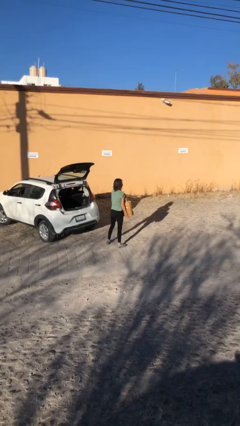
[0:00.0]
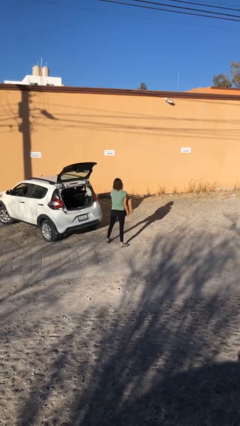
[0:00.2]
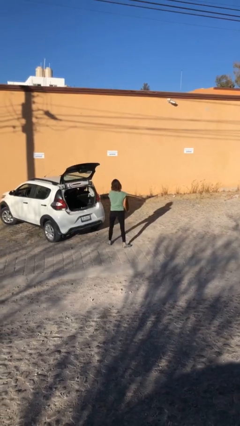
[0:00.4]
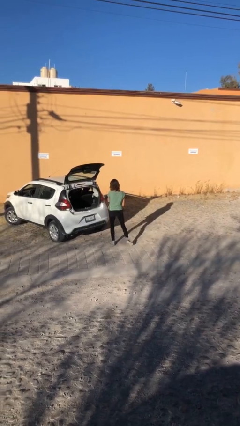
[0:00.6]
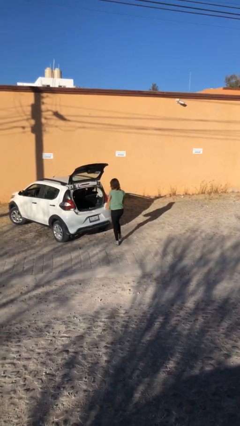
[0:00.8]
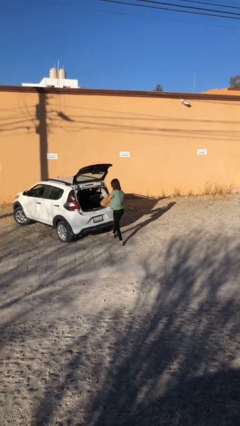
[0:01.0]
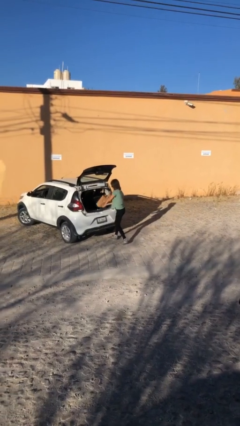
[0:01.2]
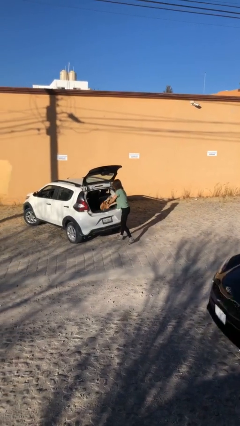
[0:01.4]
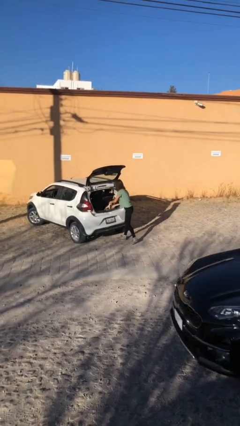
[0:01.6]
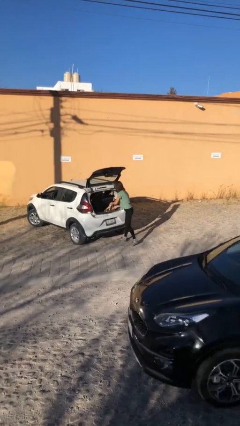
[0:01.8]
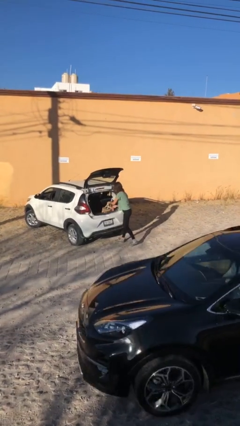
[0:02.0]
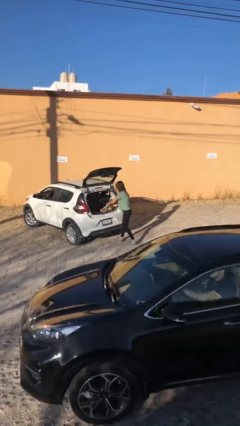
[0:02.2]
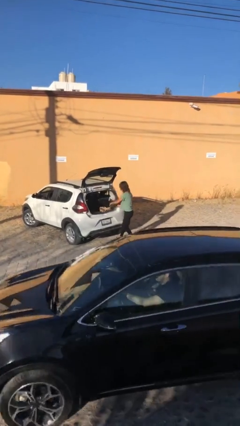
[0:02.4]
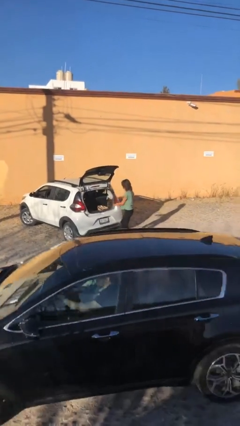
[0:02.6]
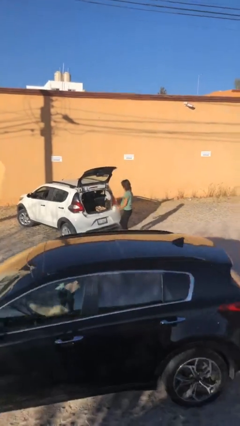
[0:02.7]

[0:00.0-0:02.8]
person loads car

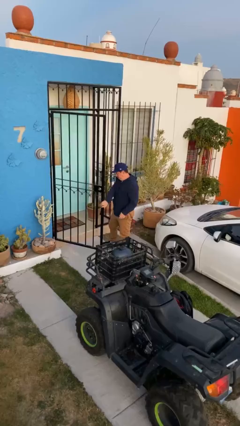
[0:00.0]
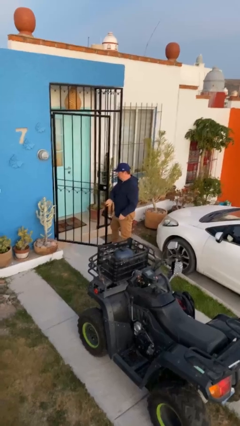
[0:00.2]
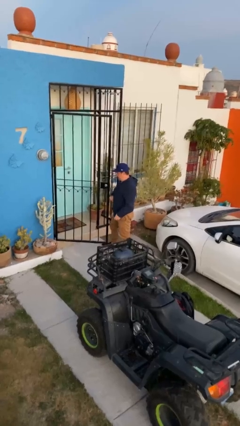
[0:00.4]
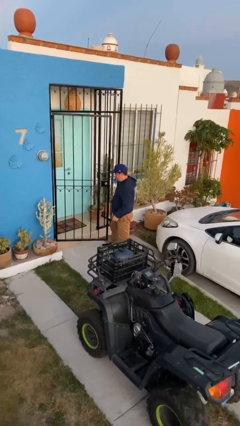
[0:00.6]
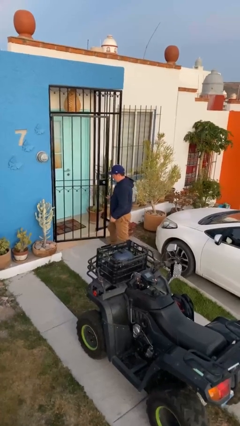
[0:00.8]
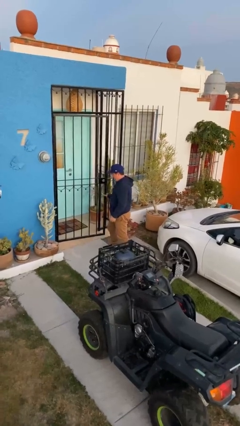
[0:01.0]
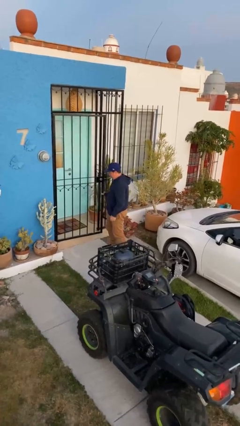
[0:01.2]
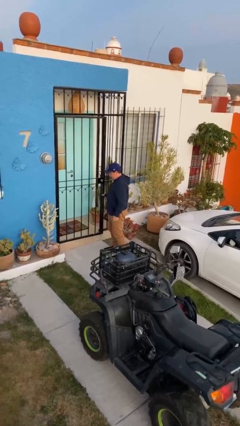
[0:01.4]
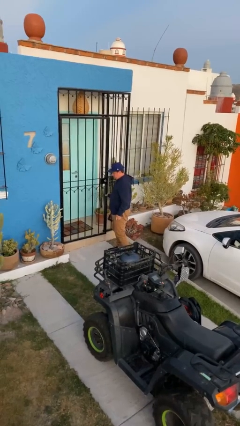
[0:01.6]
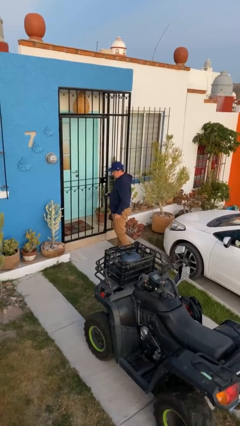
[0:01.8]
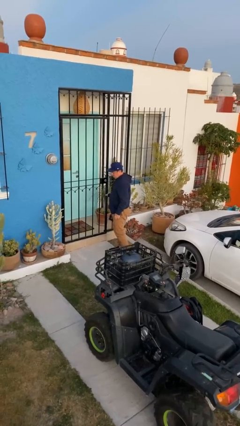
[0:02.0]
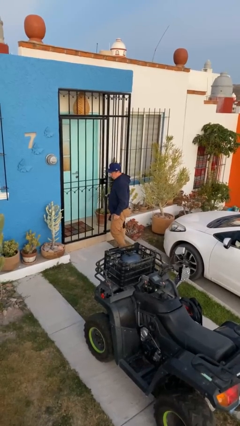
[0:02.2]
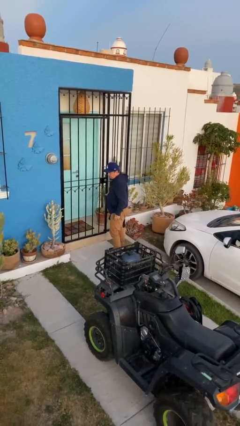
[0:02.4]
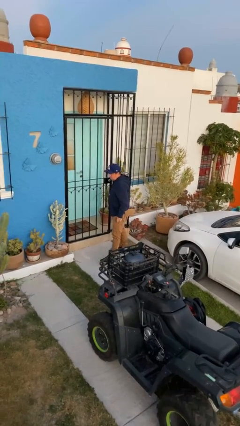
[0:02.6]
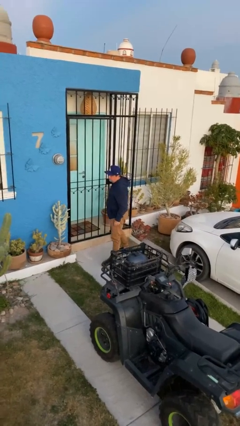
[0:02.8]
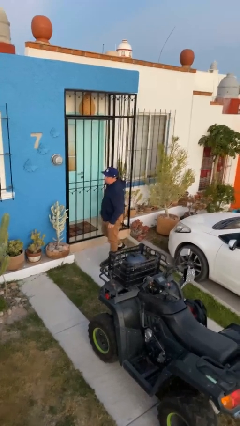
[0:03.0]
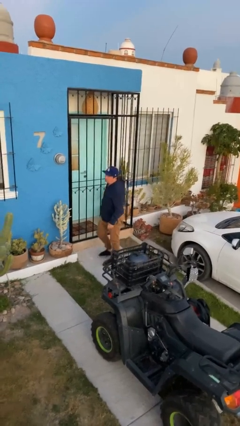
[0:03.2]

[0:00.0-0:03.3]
person closes facility door

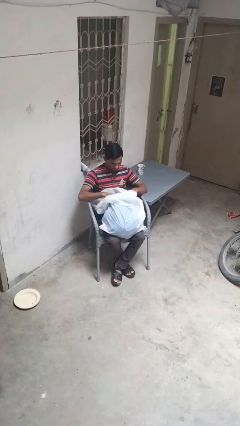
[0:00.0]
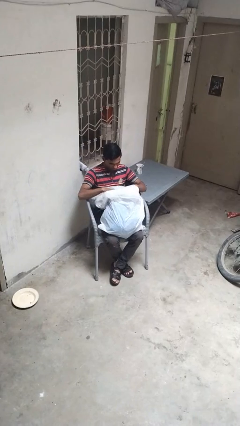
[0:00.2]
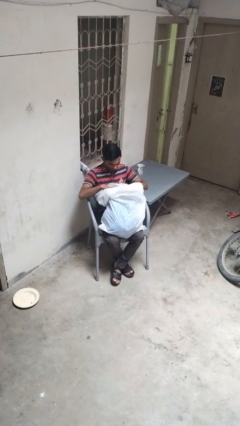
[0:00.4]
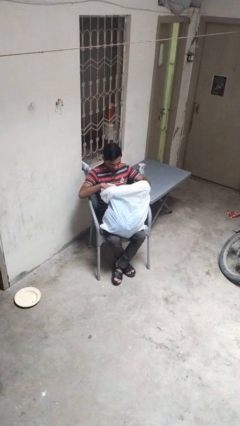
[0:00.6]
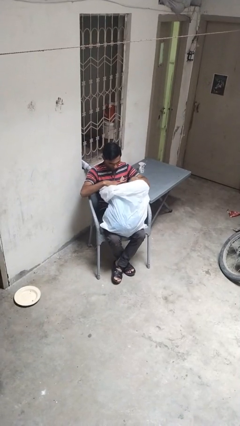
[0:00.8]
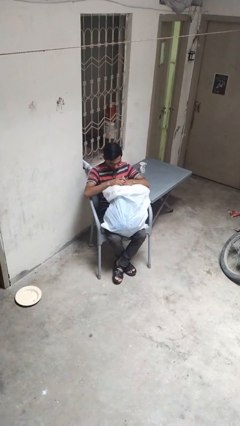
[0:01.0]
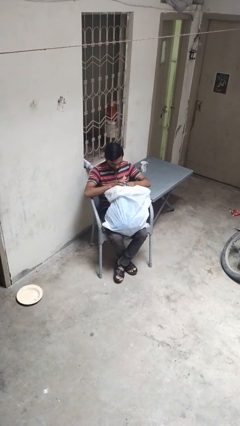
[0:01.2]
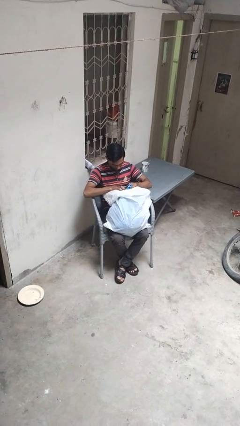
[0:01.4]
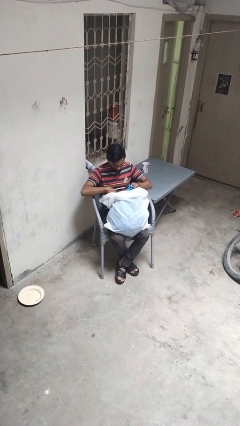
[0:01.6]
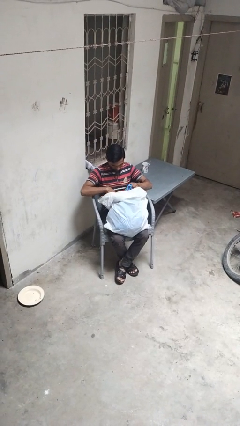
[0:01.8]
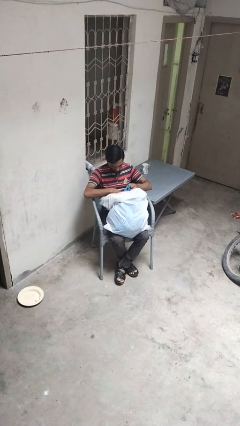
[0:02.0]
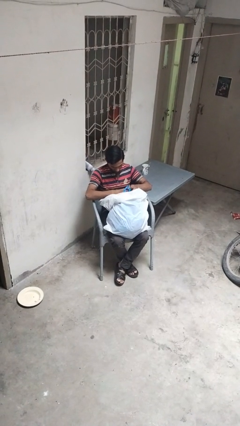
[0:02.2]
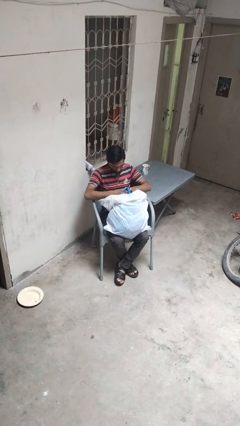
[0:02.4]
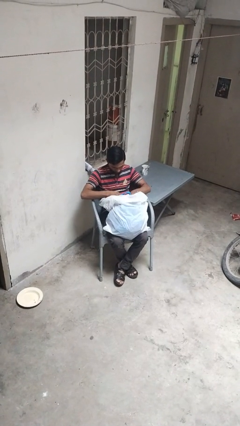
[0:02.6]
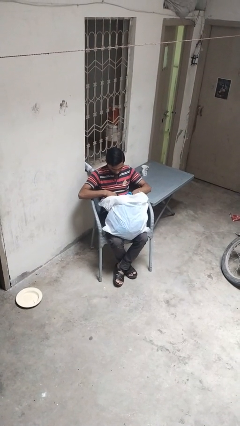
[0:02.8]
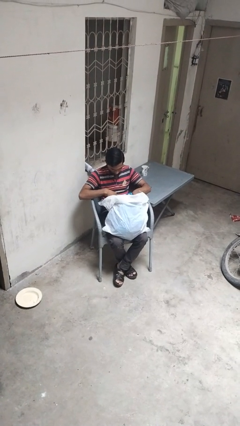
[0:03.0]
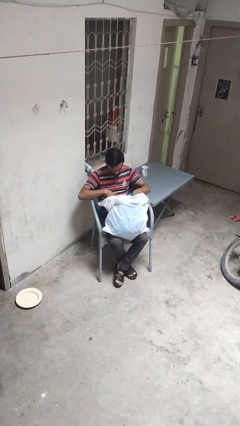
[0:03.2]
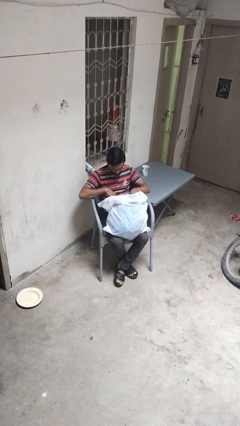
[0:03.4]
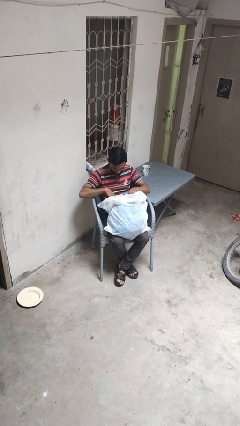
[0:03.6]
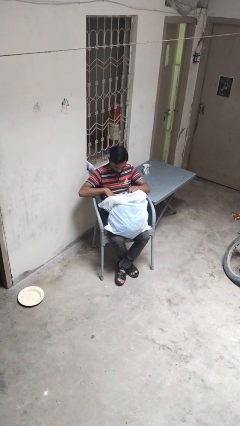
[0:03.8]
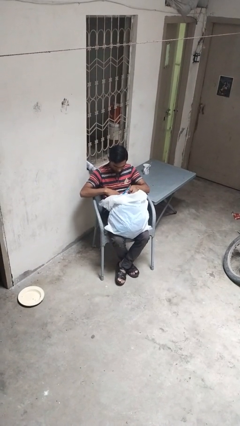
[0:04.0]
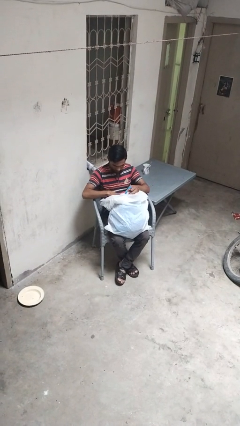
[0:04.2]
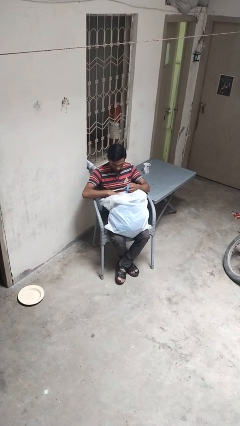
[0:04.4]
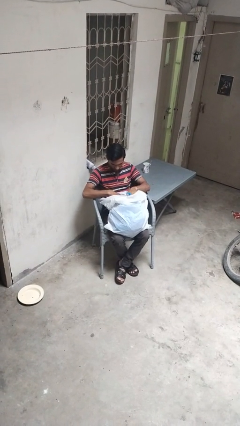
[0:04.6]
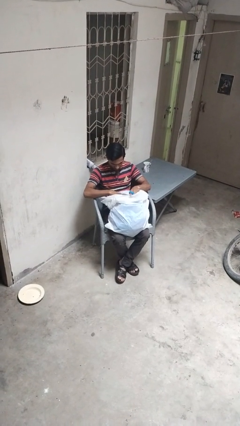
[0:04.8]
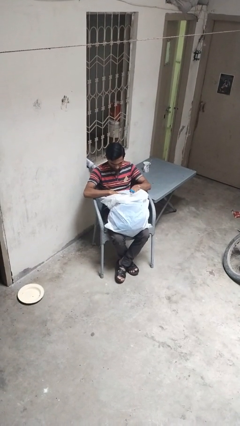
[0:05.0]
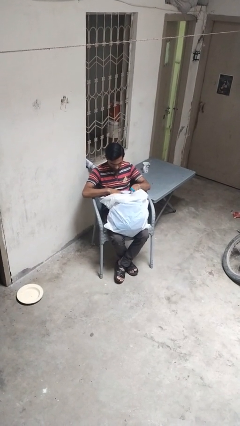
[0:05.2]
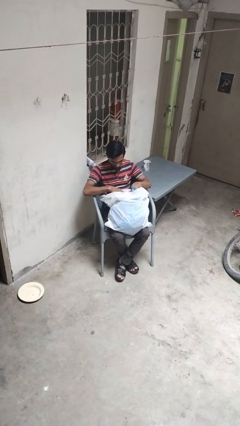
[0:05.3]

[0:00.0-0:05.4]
person searches in bag

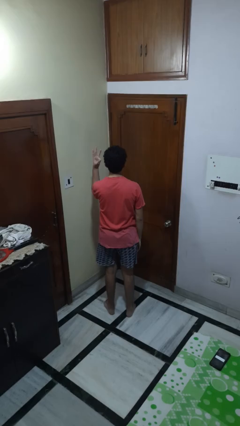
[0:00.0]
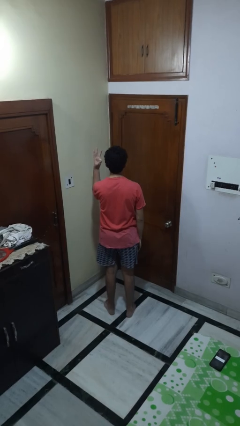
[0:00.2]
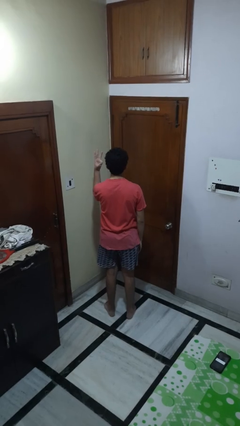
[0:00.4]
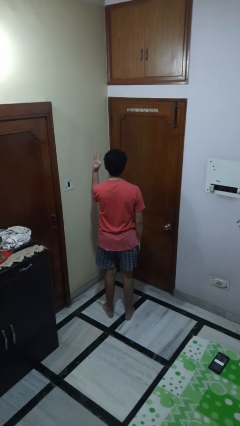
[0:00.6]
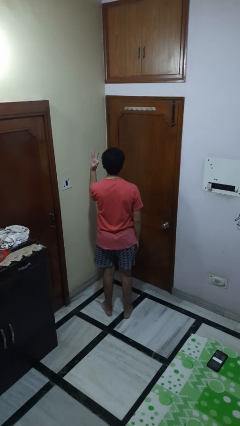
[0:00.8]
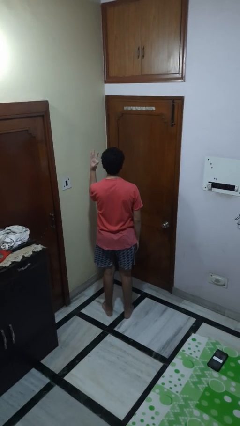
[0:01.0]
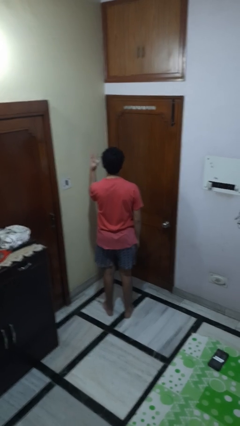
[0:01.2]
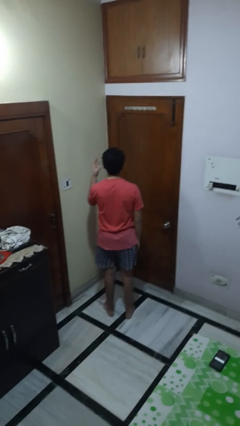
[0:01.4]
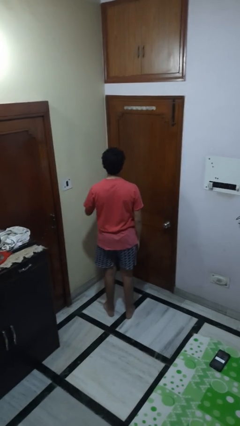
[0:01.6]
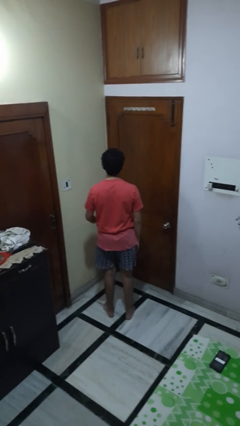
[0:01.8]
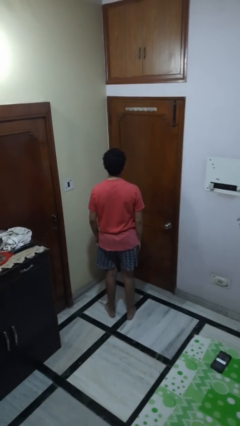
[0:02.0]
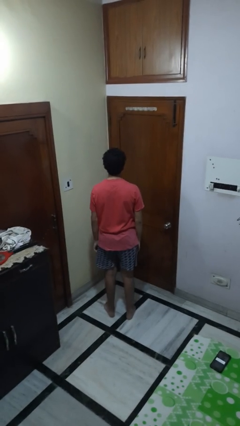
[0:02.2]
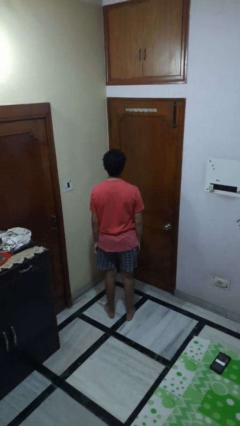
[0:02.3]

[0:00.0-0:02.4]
person gestures number three

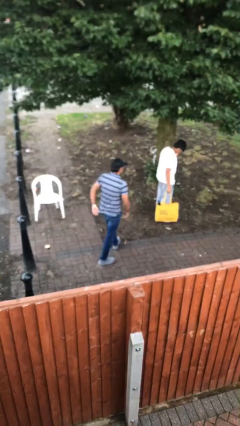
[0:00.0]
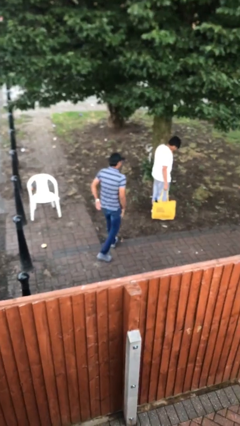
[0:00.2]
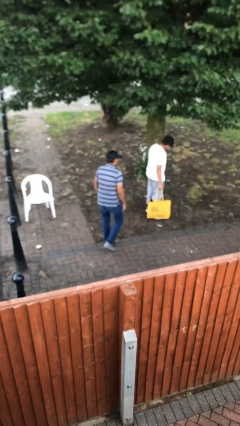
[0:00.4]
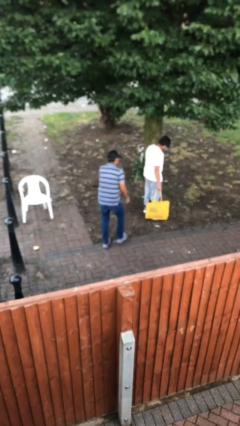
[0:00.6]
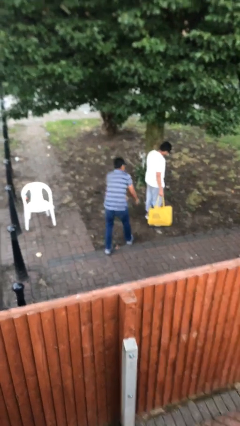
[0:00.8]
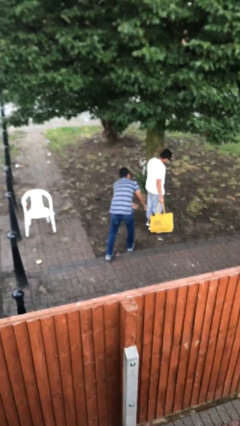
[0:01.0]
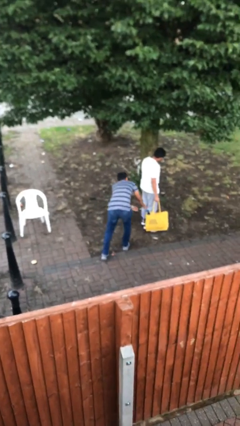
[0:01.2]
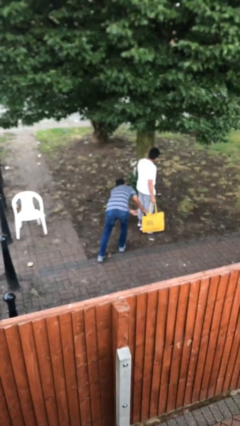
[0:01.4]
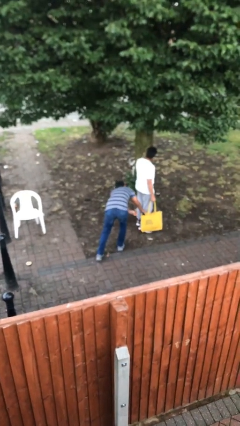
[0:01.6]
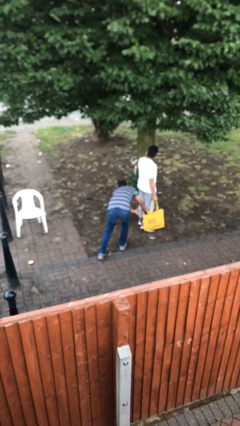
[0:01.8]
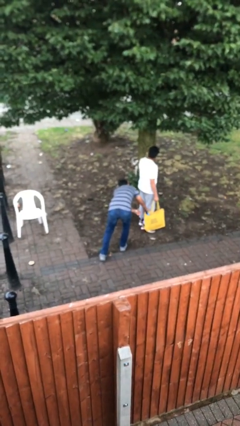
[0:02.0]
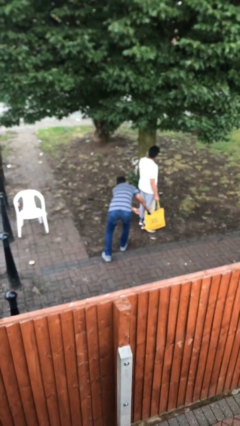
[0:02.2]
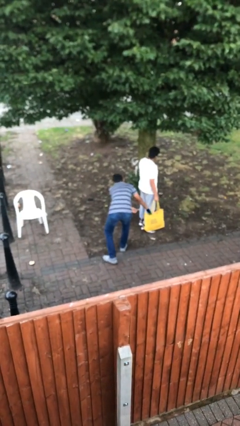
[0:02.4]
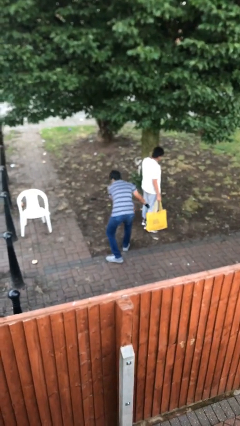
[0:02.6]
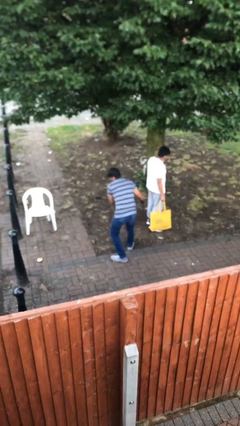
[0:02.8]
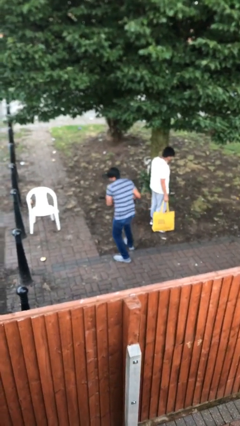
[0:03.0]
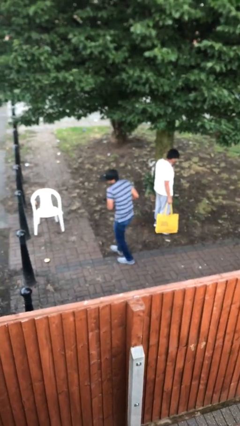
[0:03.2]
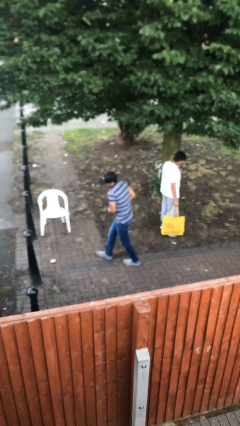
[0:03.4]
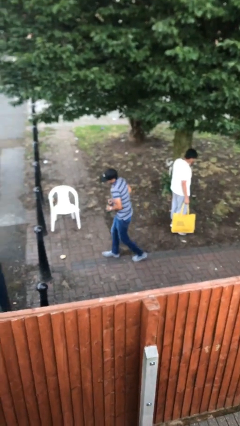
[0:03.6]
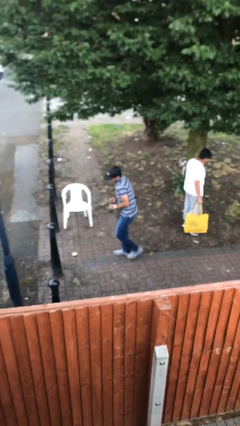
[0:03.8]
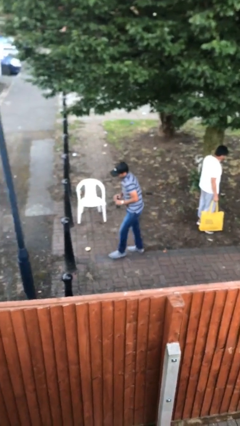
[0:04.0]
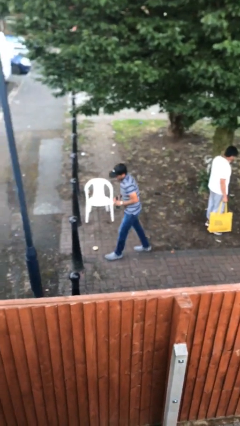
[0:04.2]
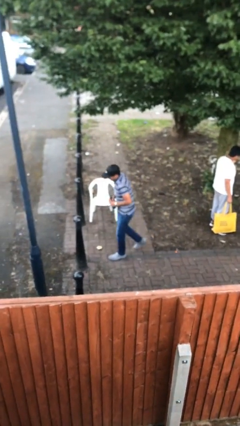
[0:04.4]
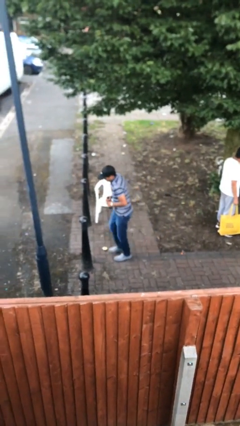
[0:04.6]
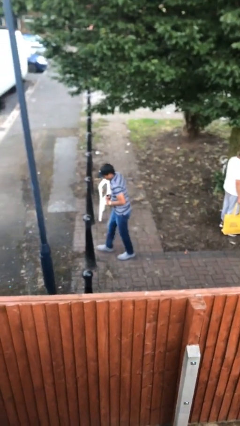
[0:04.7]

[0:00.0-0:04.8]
person steals object from person
